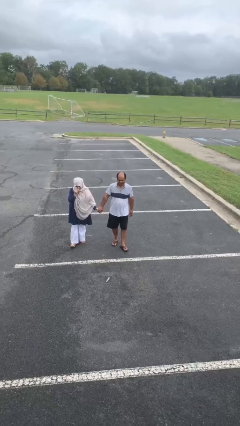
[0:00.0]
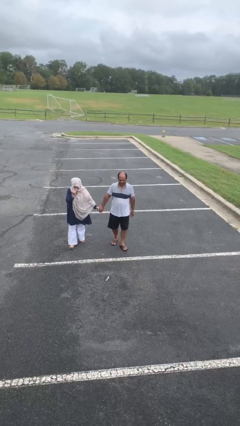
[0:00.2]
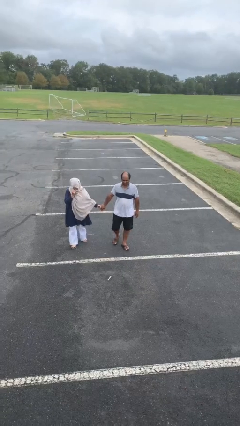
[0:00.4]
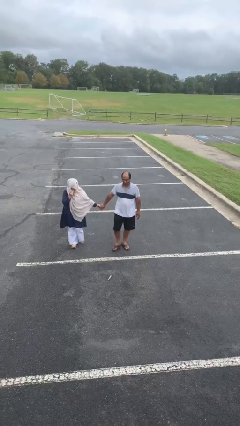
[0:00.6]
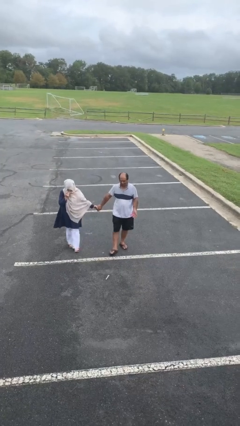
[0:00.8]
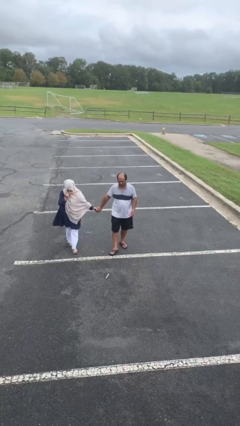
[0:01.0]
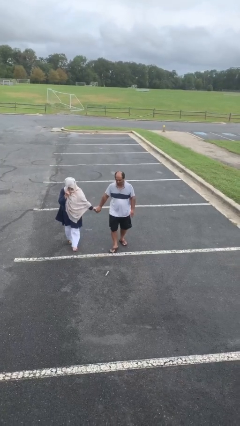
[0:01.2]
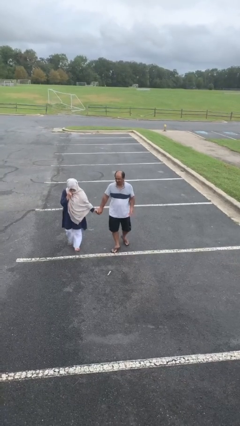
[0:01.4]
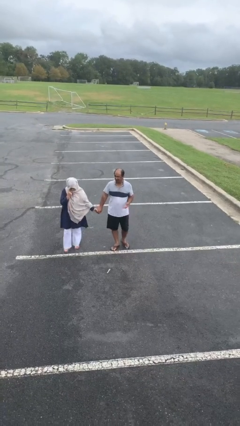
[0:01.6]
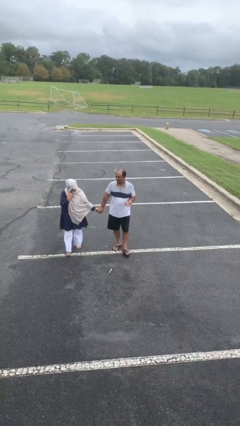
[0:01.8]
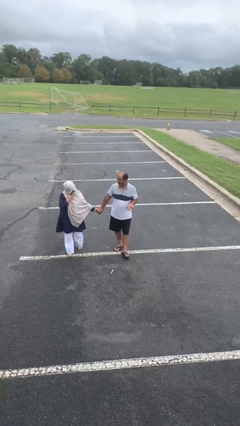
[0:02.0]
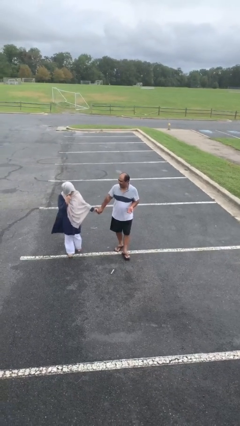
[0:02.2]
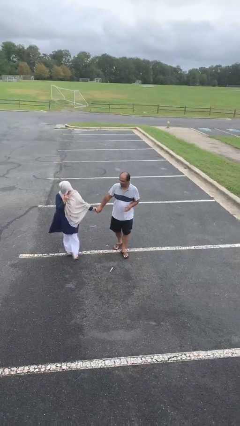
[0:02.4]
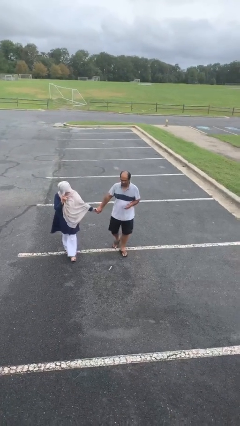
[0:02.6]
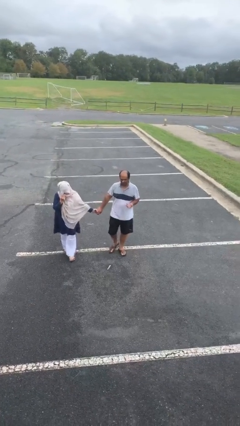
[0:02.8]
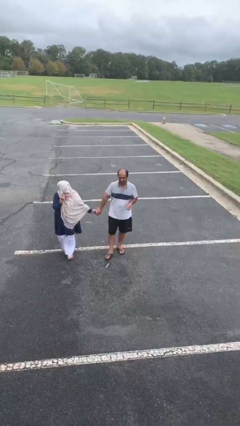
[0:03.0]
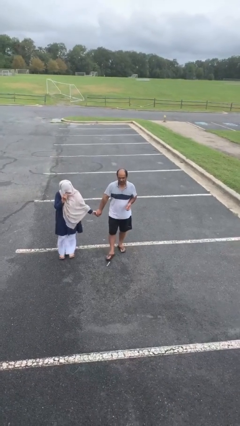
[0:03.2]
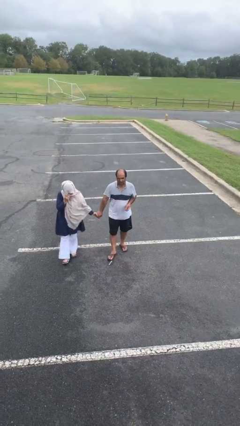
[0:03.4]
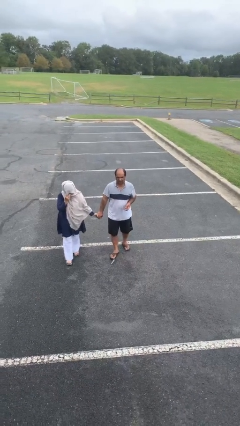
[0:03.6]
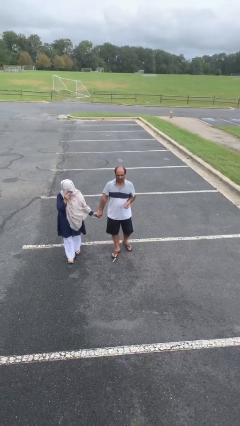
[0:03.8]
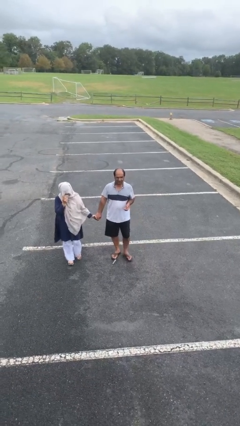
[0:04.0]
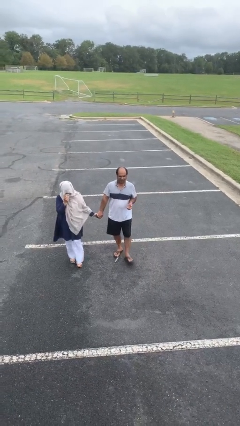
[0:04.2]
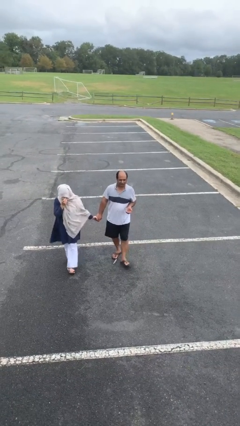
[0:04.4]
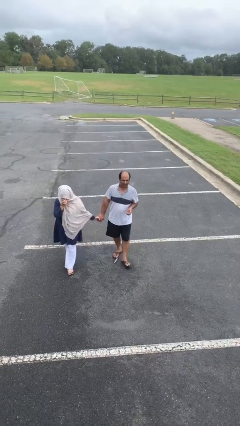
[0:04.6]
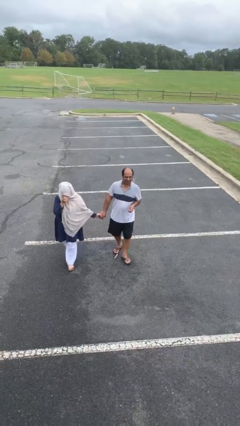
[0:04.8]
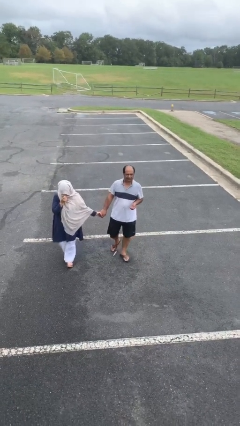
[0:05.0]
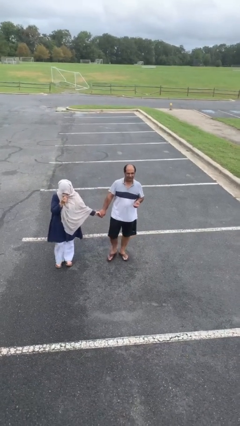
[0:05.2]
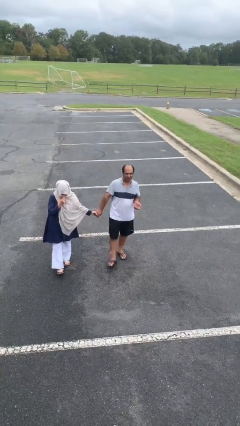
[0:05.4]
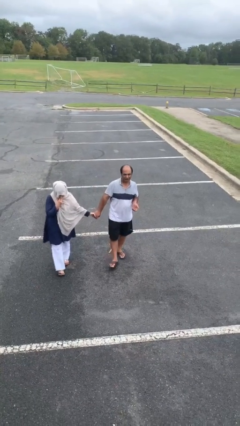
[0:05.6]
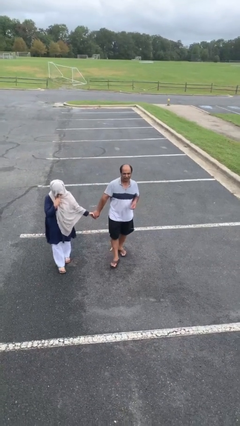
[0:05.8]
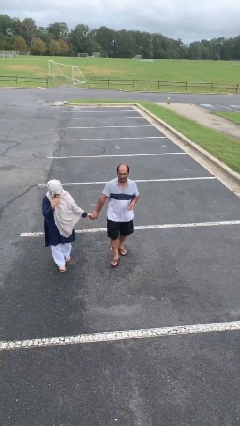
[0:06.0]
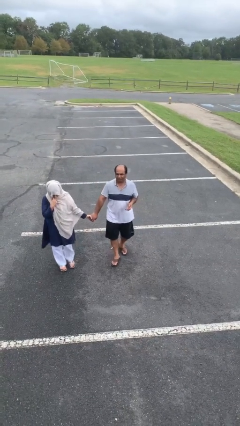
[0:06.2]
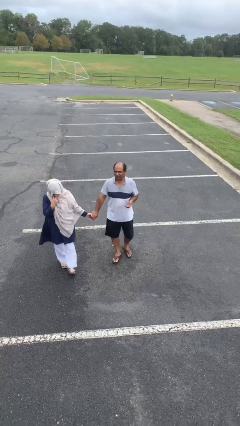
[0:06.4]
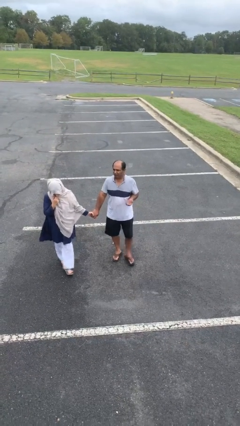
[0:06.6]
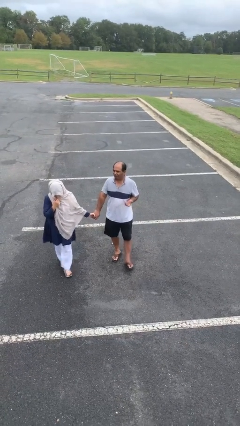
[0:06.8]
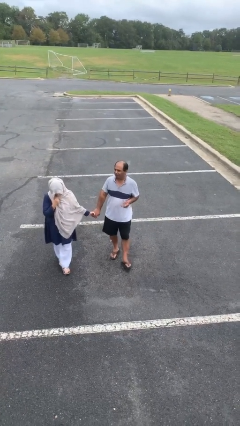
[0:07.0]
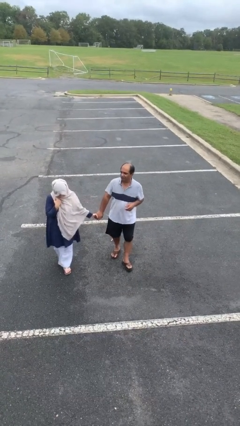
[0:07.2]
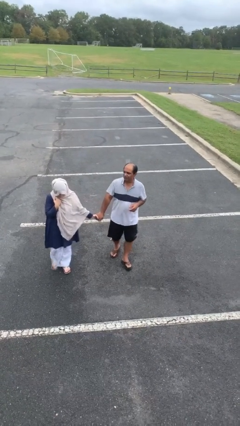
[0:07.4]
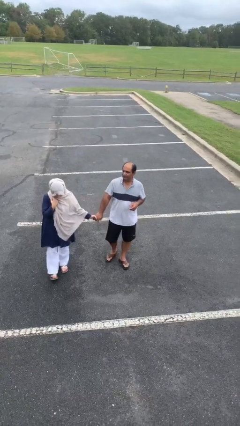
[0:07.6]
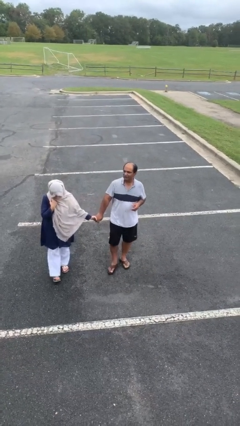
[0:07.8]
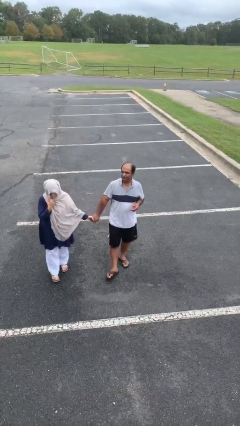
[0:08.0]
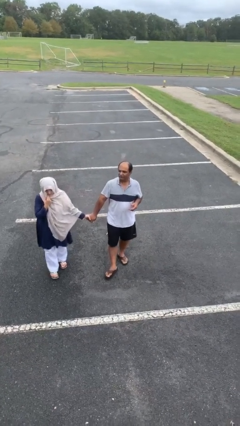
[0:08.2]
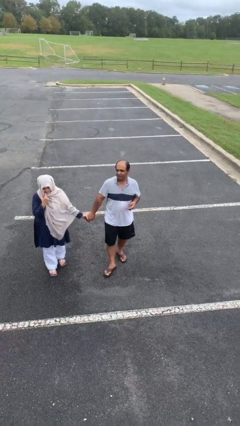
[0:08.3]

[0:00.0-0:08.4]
person holds hand

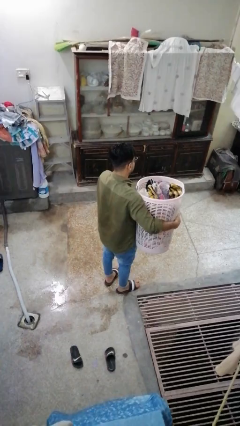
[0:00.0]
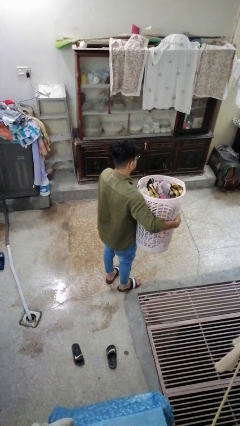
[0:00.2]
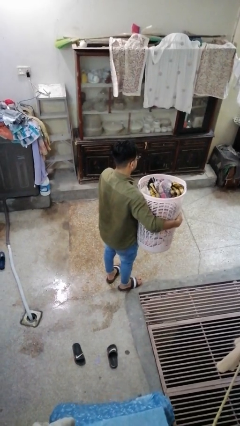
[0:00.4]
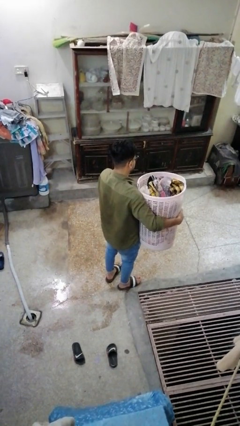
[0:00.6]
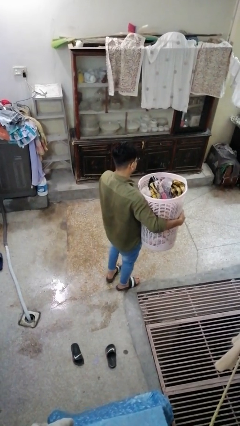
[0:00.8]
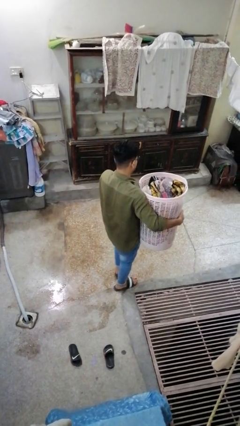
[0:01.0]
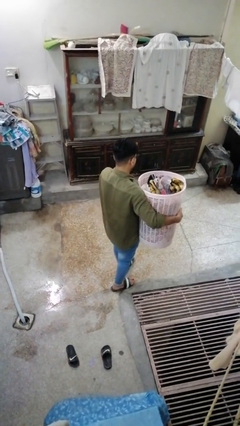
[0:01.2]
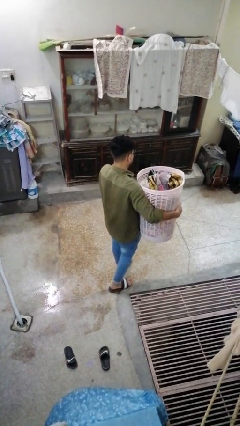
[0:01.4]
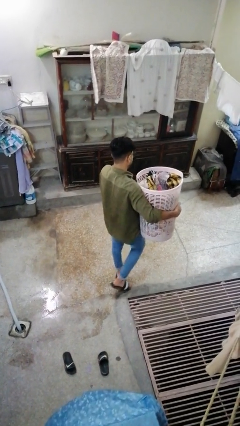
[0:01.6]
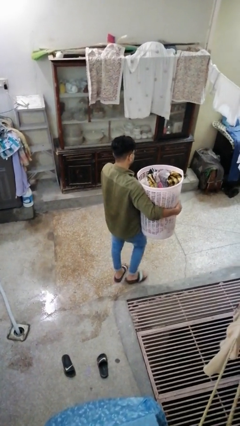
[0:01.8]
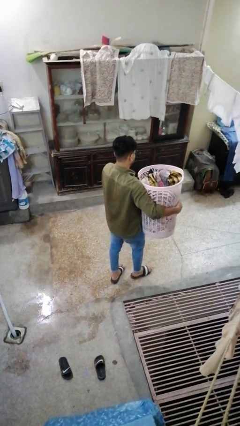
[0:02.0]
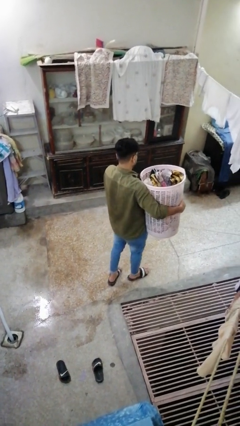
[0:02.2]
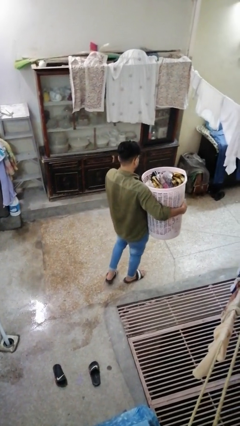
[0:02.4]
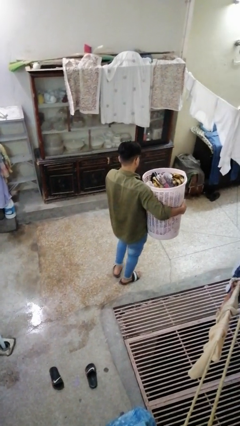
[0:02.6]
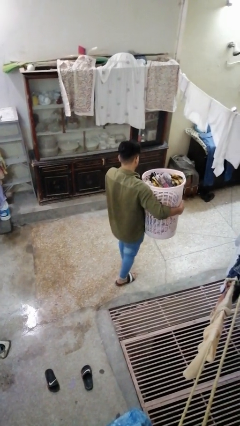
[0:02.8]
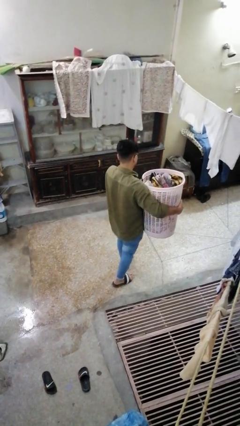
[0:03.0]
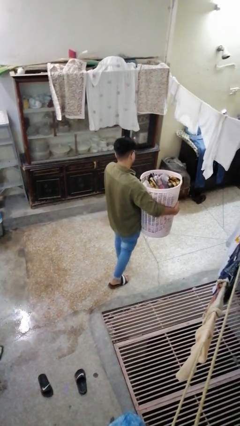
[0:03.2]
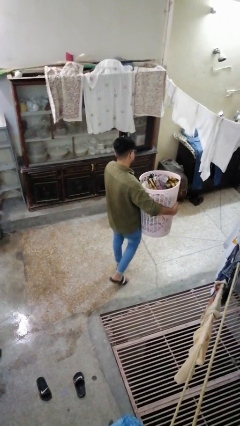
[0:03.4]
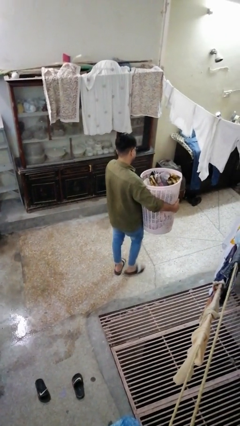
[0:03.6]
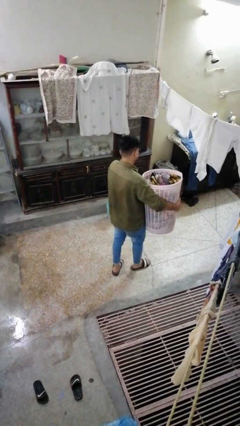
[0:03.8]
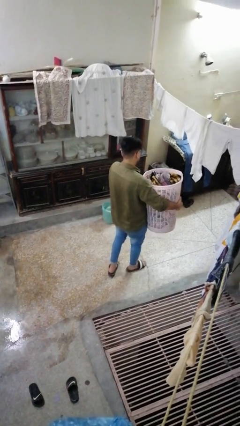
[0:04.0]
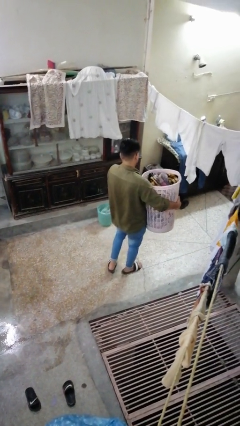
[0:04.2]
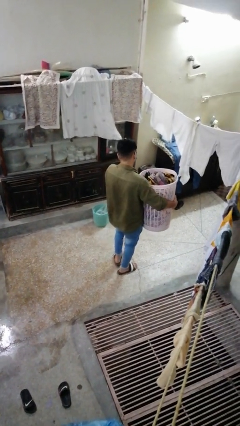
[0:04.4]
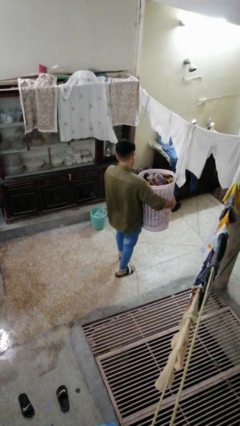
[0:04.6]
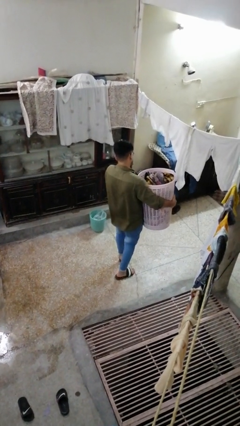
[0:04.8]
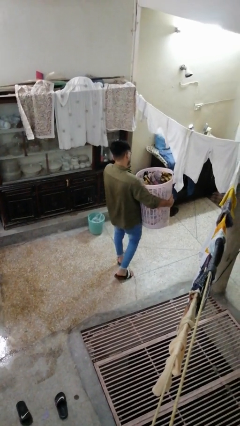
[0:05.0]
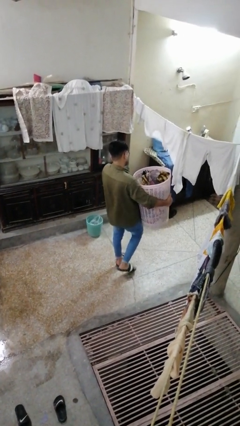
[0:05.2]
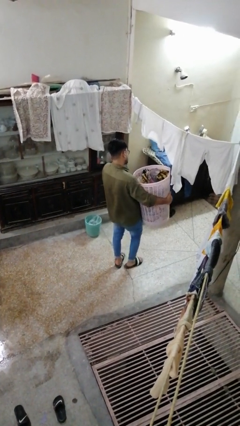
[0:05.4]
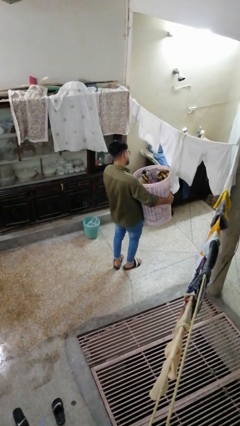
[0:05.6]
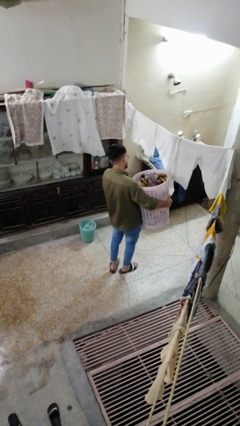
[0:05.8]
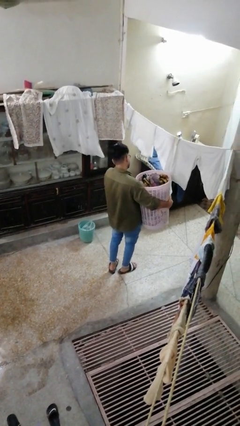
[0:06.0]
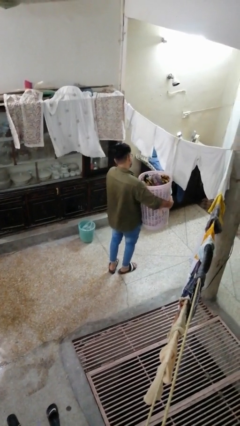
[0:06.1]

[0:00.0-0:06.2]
person carries laundry basket

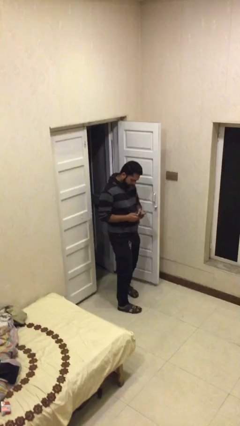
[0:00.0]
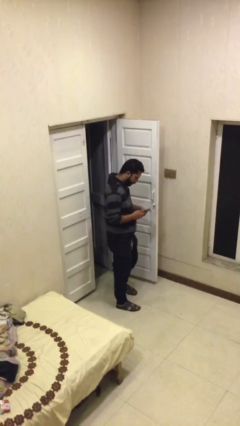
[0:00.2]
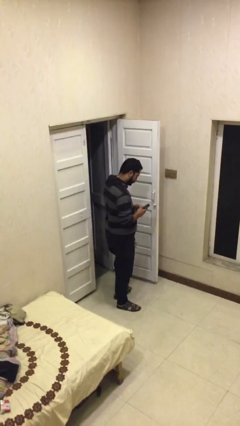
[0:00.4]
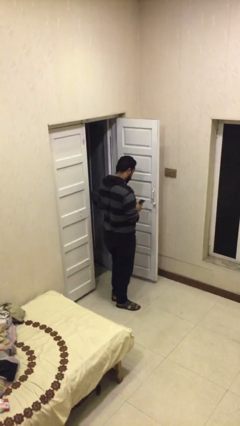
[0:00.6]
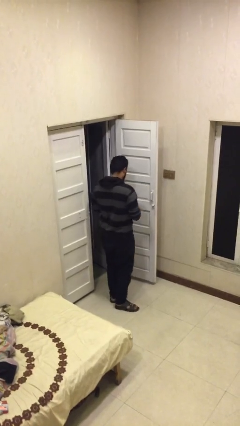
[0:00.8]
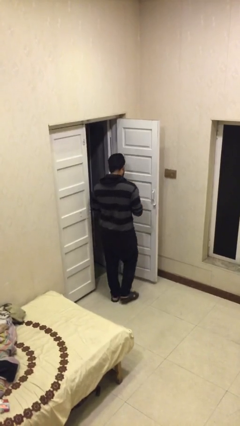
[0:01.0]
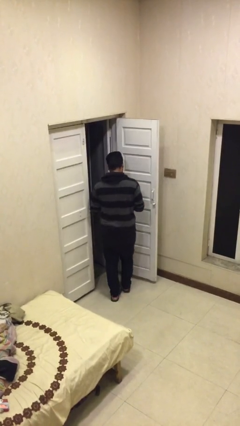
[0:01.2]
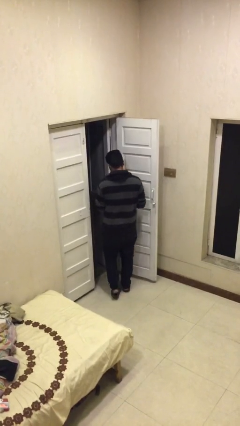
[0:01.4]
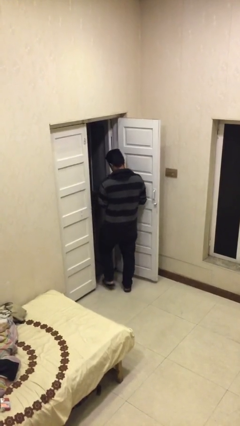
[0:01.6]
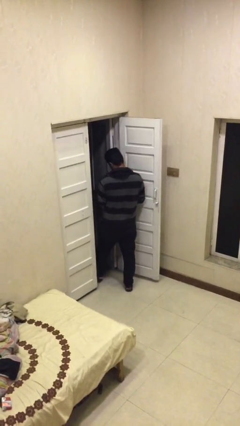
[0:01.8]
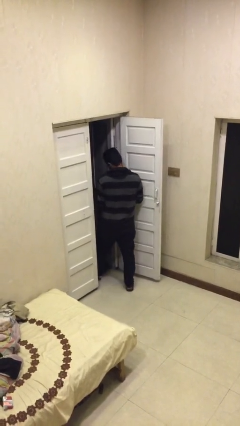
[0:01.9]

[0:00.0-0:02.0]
person exits scene through structure

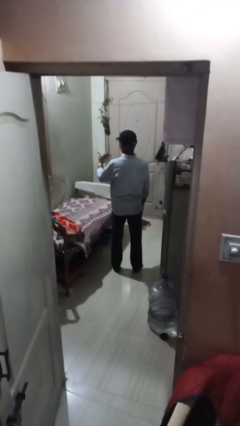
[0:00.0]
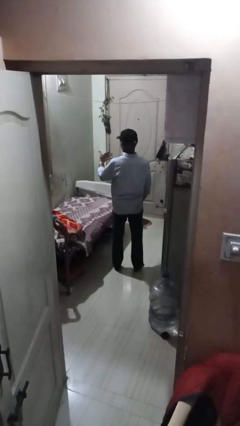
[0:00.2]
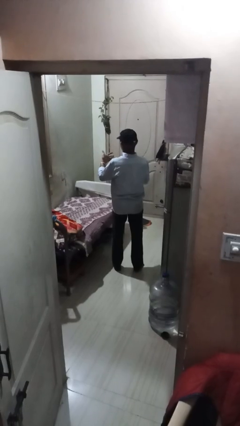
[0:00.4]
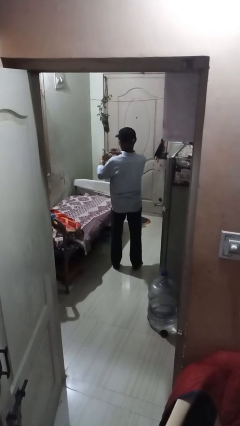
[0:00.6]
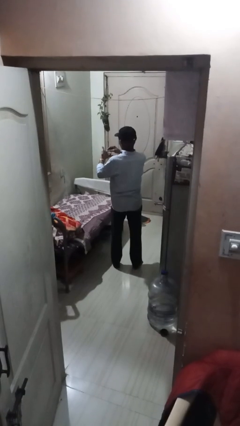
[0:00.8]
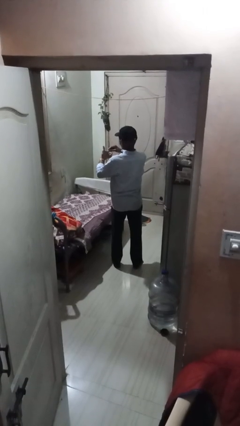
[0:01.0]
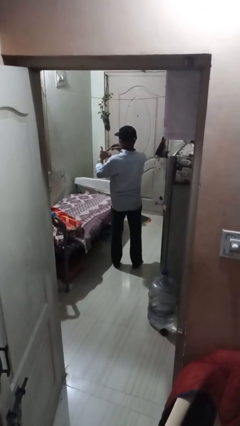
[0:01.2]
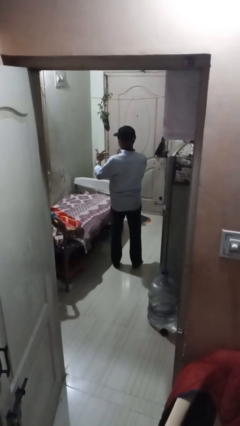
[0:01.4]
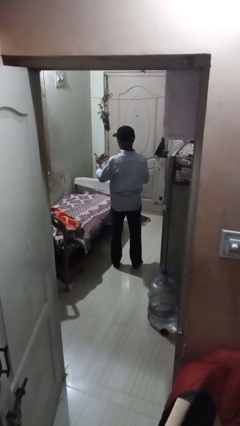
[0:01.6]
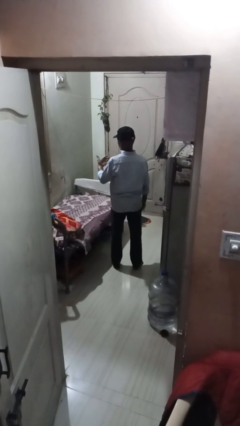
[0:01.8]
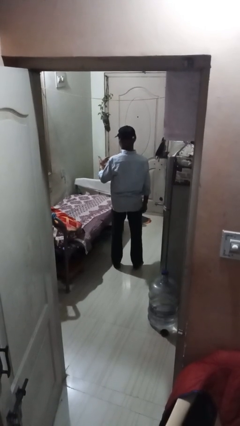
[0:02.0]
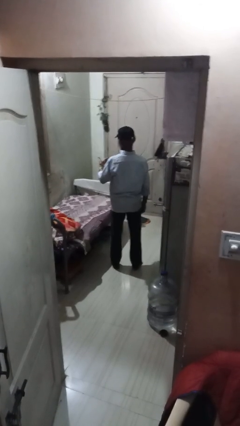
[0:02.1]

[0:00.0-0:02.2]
person takes off ring
